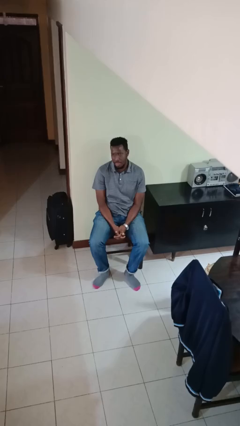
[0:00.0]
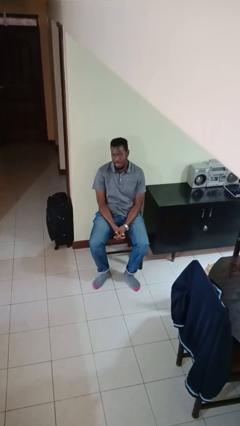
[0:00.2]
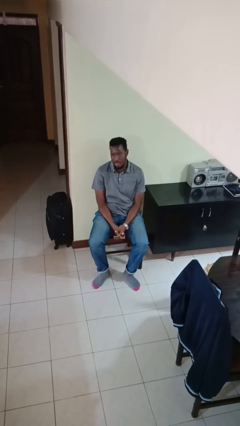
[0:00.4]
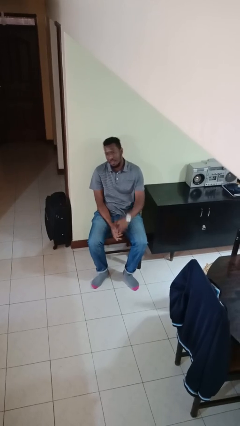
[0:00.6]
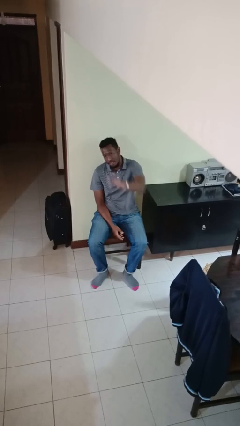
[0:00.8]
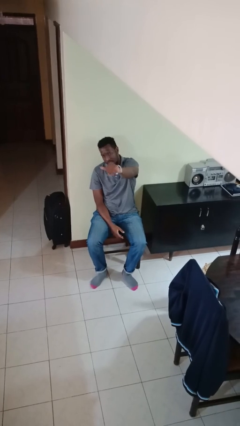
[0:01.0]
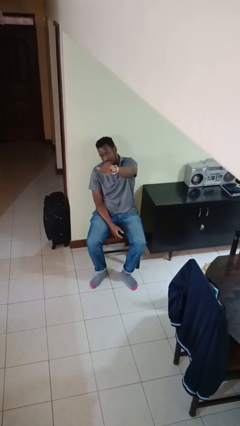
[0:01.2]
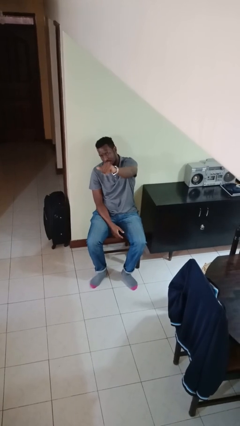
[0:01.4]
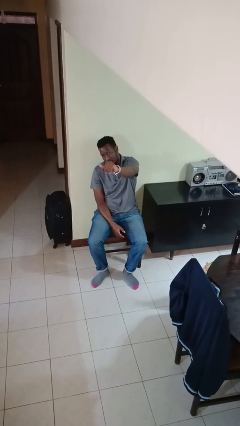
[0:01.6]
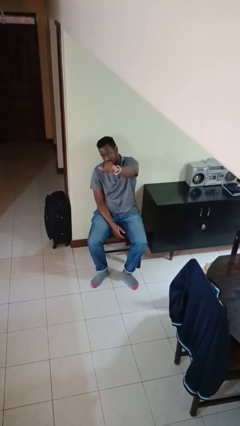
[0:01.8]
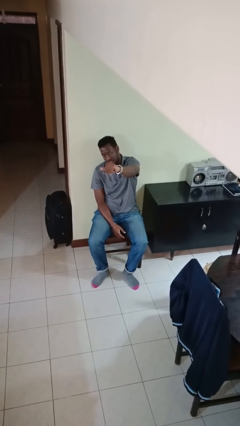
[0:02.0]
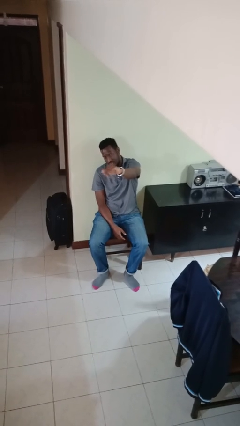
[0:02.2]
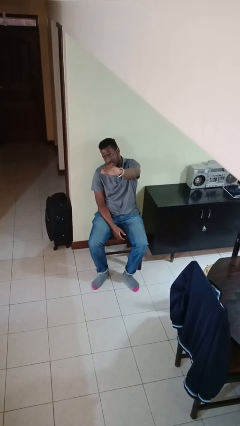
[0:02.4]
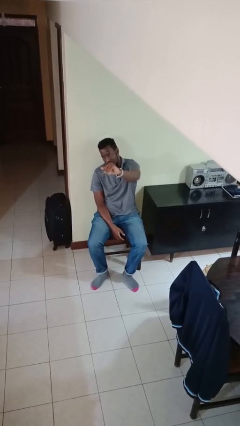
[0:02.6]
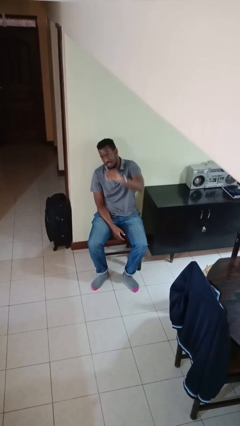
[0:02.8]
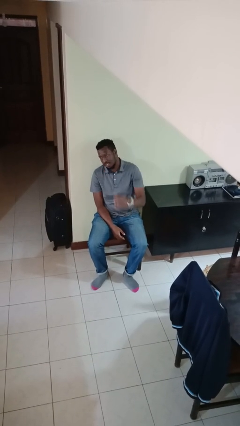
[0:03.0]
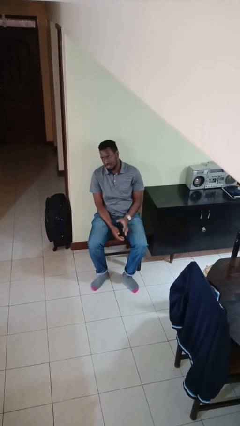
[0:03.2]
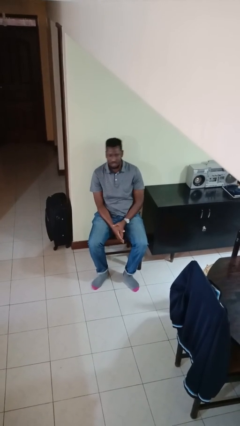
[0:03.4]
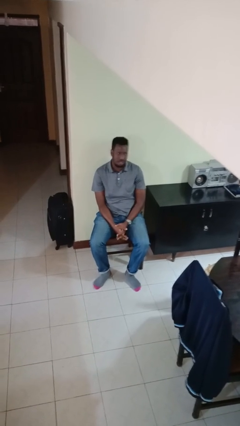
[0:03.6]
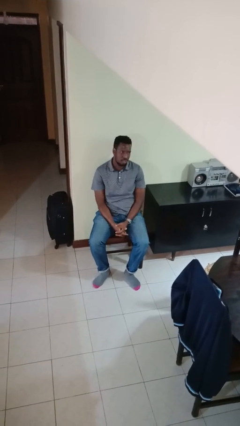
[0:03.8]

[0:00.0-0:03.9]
person gestures come here

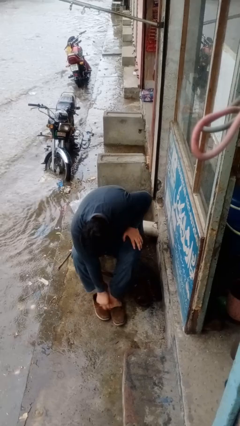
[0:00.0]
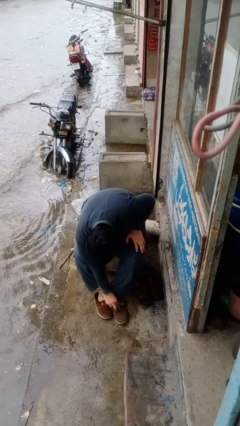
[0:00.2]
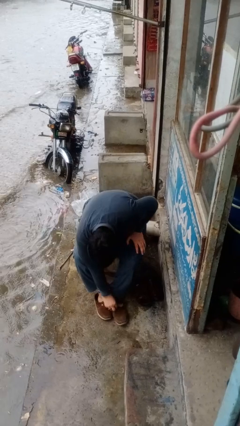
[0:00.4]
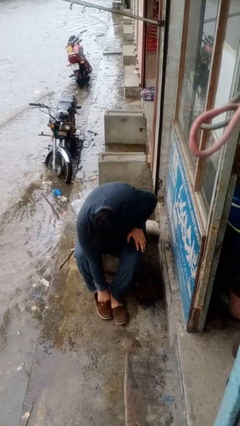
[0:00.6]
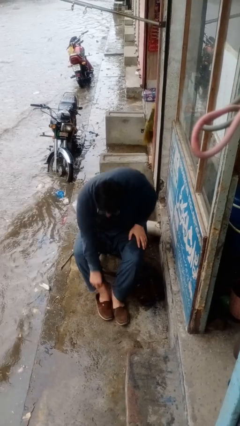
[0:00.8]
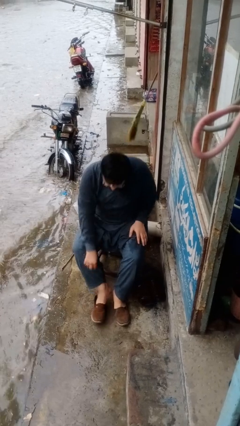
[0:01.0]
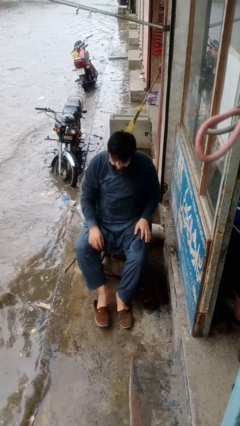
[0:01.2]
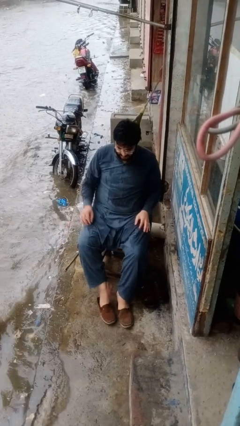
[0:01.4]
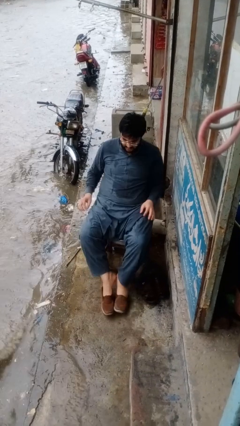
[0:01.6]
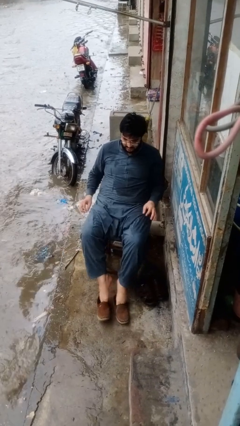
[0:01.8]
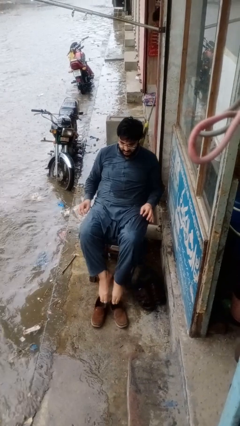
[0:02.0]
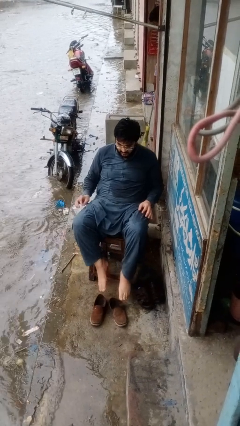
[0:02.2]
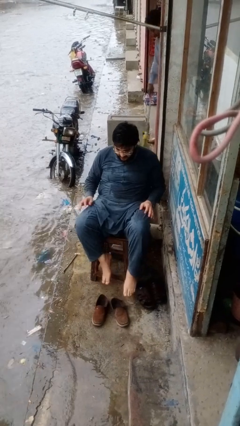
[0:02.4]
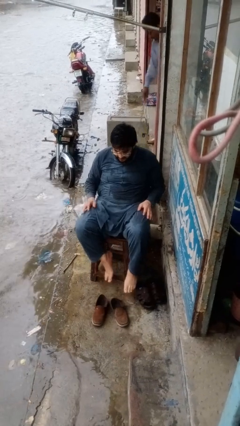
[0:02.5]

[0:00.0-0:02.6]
person takes off shoes

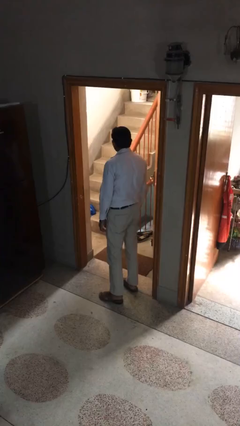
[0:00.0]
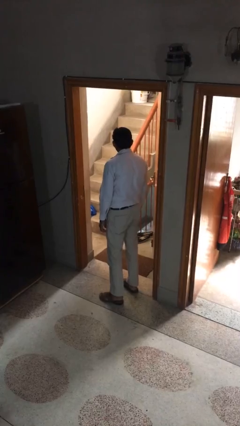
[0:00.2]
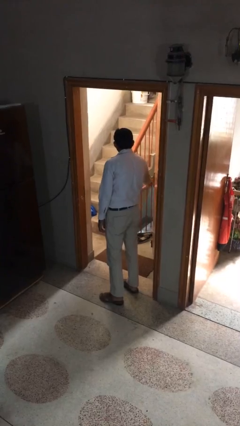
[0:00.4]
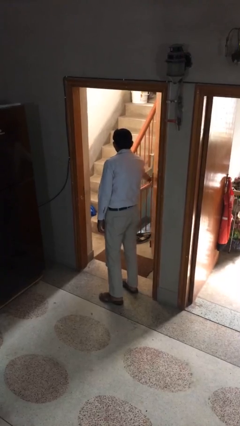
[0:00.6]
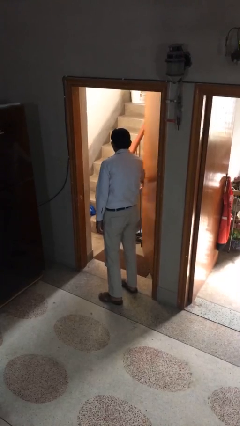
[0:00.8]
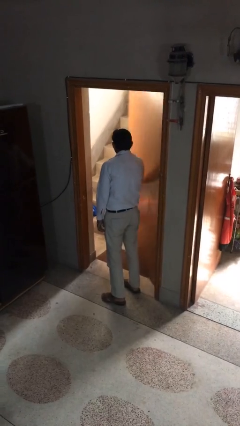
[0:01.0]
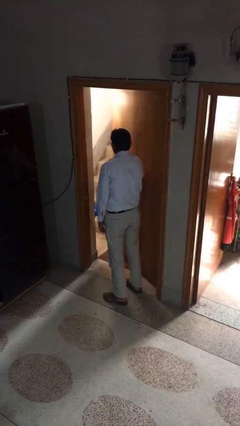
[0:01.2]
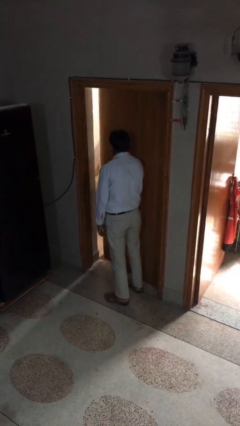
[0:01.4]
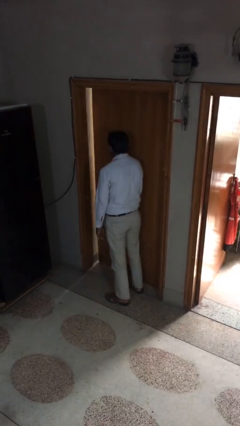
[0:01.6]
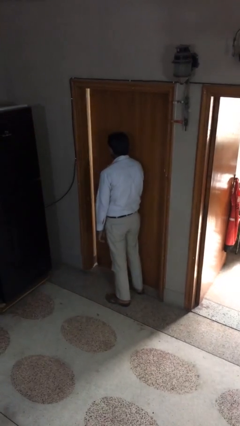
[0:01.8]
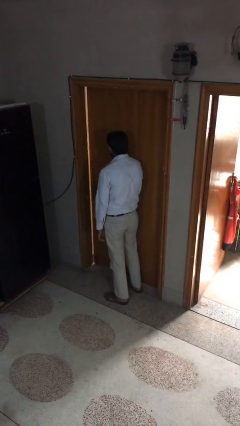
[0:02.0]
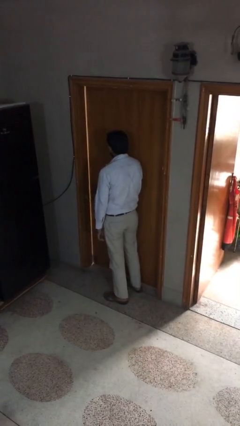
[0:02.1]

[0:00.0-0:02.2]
person closes facility door

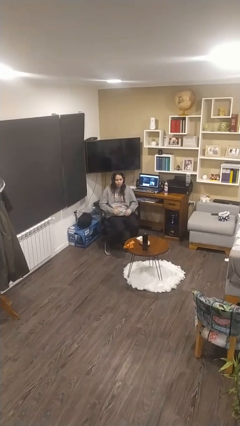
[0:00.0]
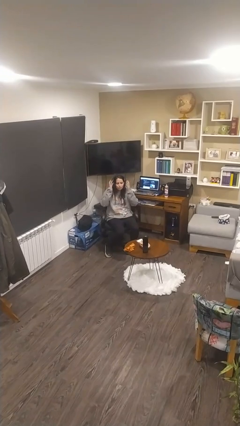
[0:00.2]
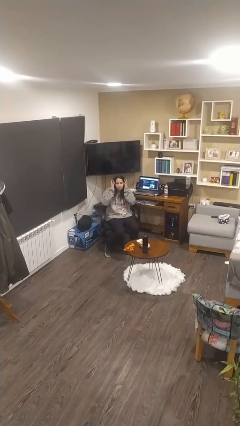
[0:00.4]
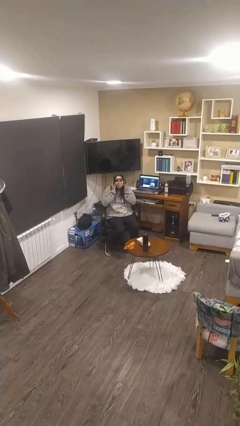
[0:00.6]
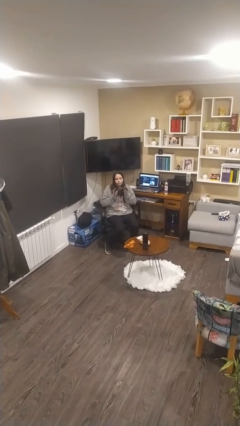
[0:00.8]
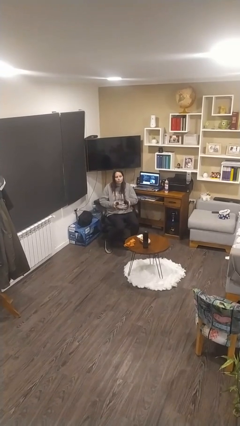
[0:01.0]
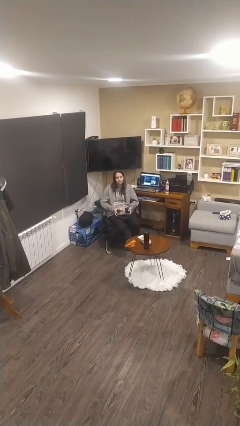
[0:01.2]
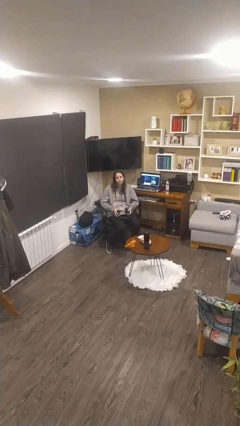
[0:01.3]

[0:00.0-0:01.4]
person takes off headphones

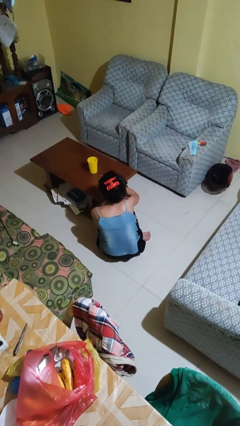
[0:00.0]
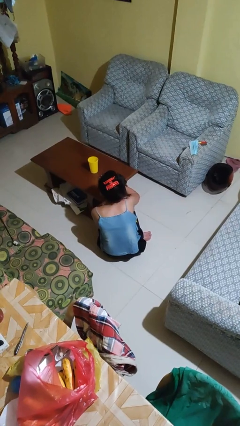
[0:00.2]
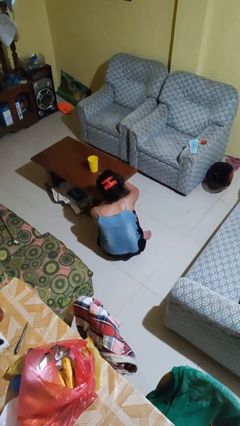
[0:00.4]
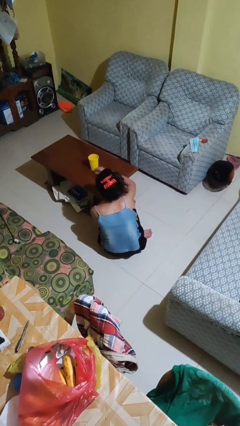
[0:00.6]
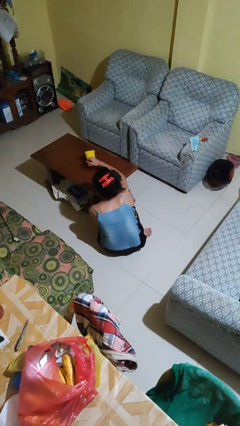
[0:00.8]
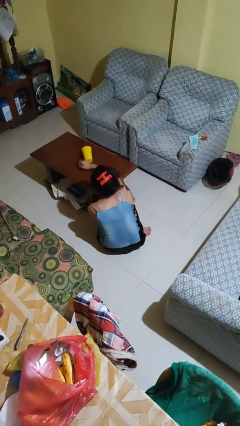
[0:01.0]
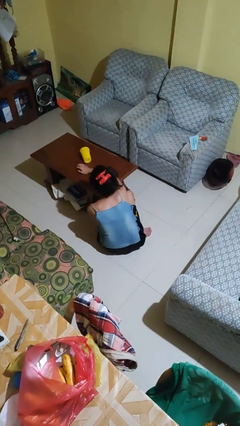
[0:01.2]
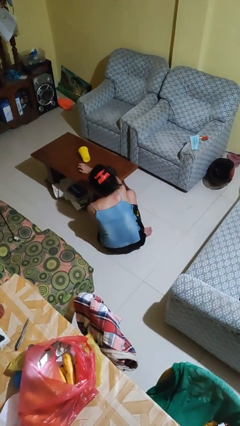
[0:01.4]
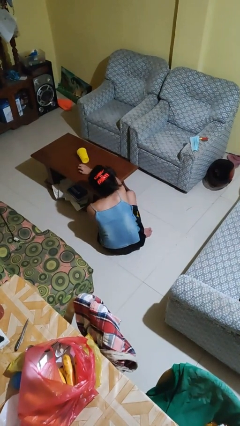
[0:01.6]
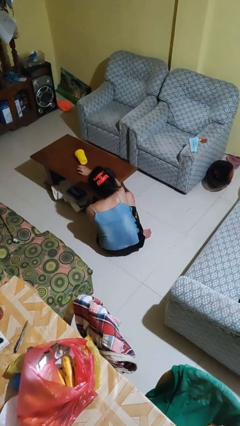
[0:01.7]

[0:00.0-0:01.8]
person knocks over glass

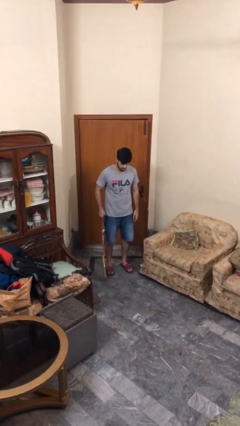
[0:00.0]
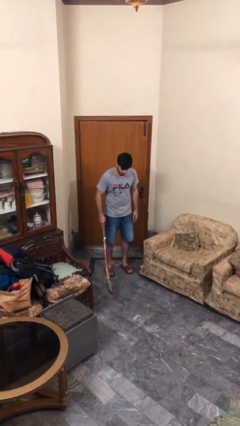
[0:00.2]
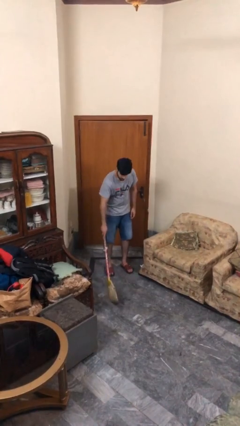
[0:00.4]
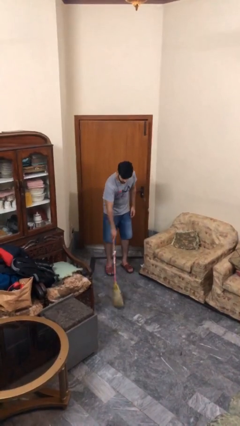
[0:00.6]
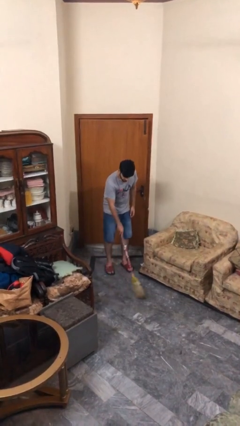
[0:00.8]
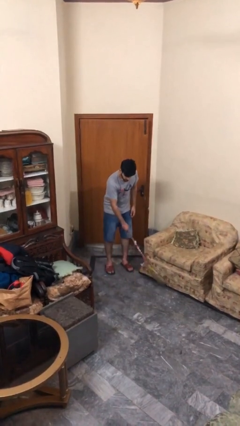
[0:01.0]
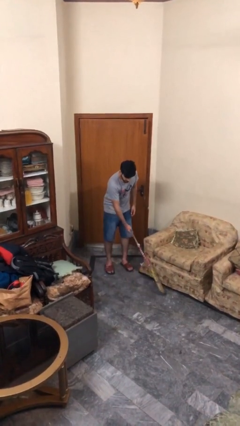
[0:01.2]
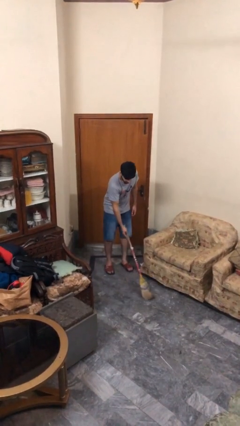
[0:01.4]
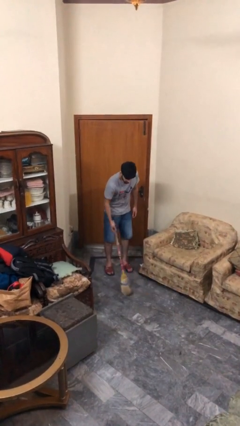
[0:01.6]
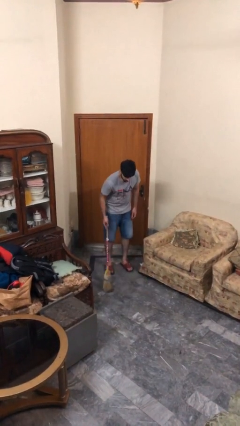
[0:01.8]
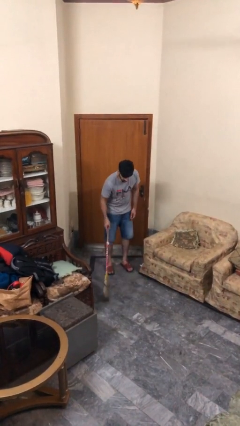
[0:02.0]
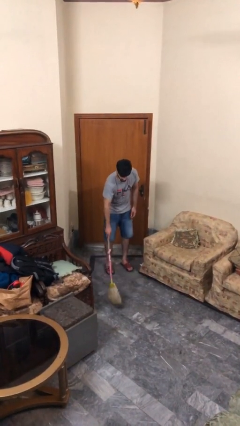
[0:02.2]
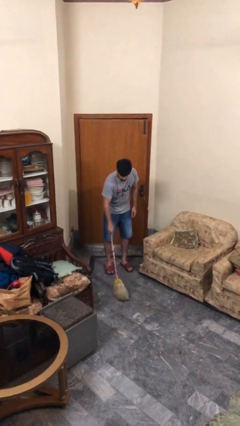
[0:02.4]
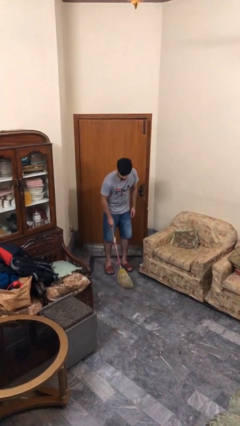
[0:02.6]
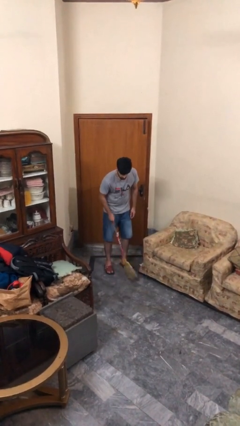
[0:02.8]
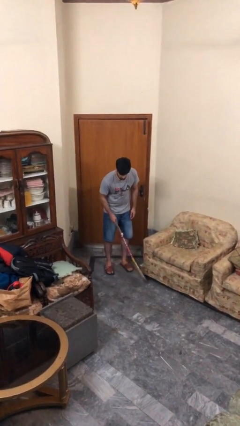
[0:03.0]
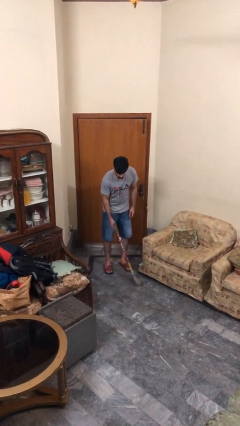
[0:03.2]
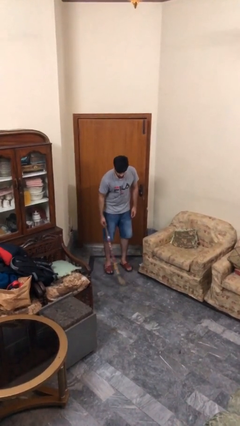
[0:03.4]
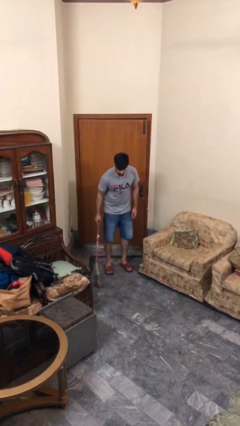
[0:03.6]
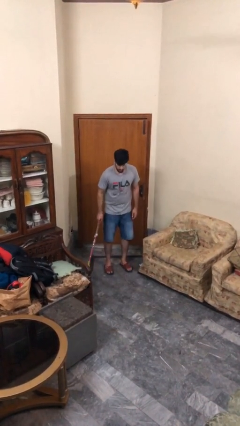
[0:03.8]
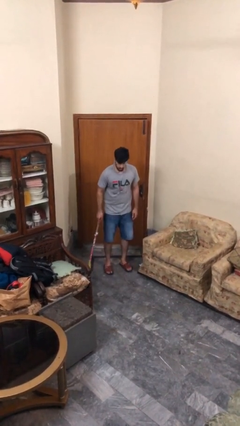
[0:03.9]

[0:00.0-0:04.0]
person sweeps floor

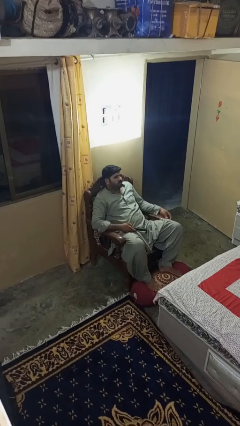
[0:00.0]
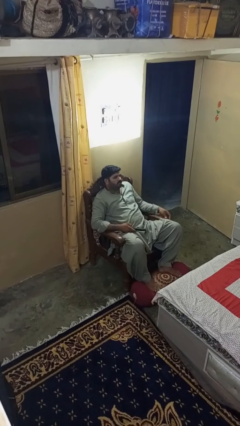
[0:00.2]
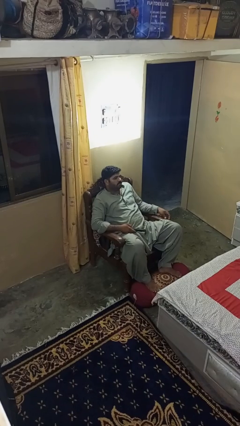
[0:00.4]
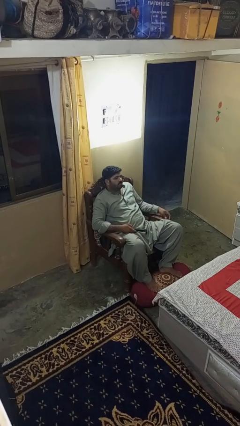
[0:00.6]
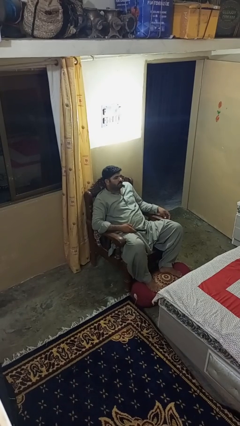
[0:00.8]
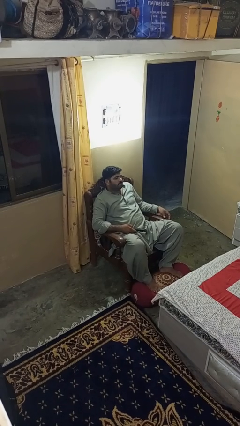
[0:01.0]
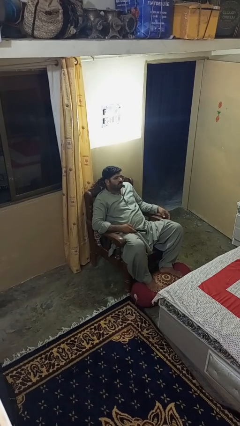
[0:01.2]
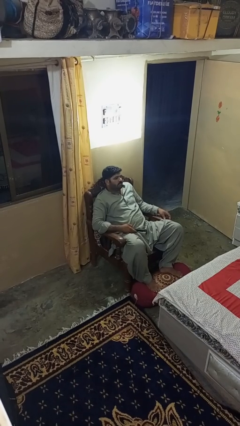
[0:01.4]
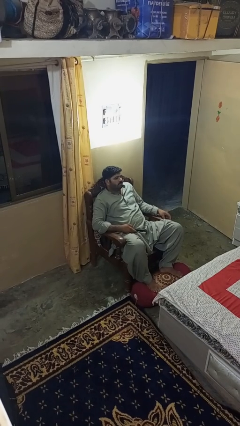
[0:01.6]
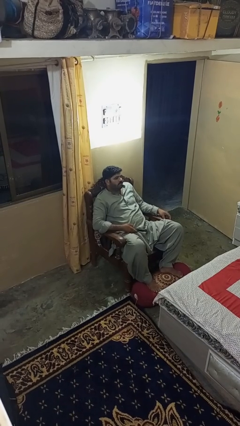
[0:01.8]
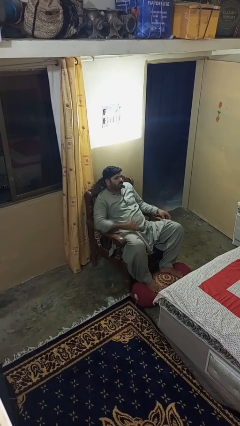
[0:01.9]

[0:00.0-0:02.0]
person uses television remote
